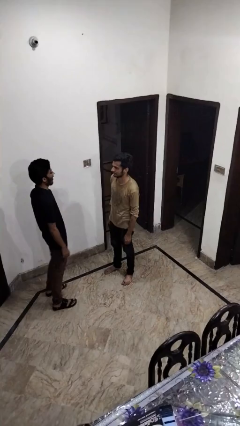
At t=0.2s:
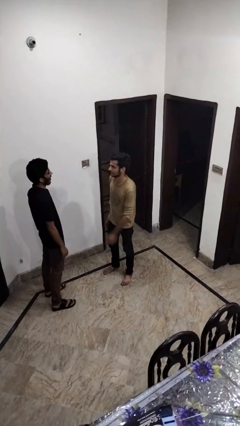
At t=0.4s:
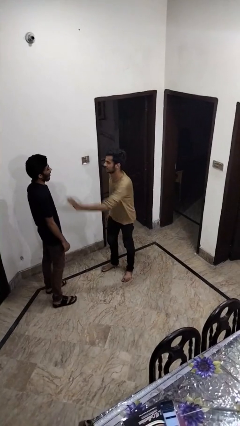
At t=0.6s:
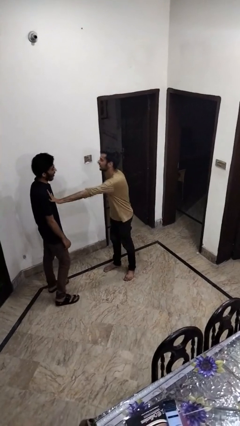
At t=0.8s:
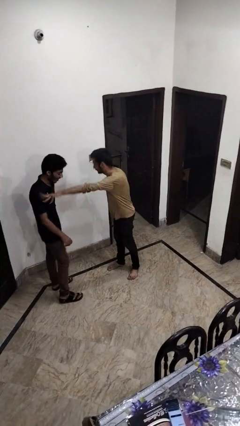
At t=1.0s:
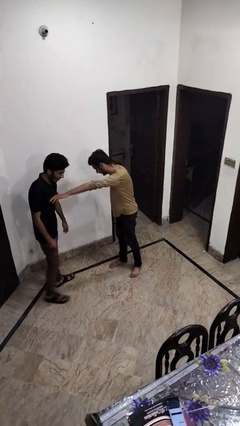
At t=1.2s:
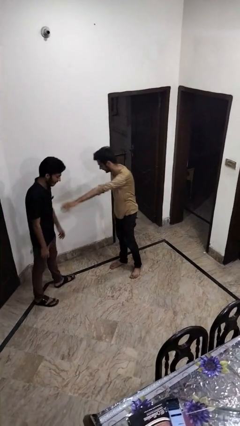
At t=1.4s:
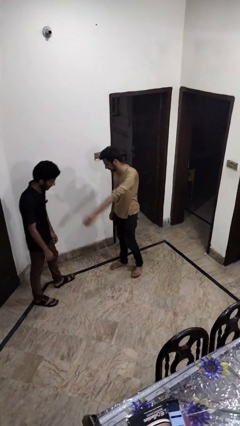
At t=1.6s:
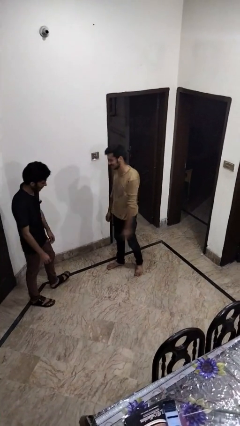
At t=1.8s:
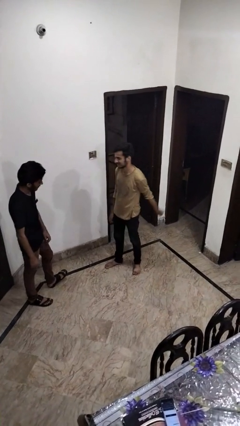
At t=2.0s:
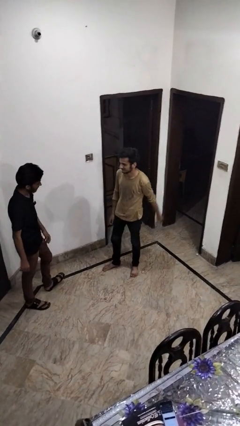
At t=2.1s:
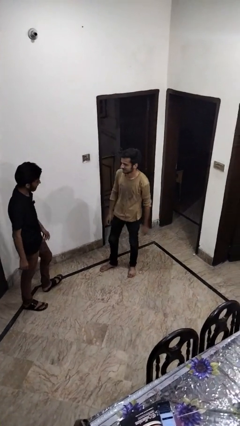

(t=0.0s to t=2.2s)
person shoves person

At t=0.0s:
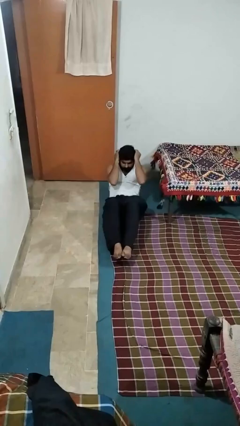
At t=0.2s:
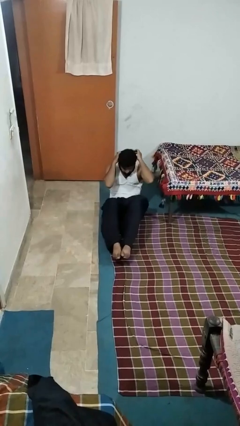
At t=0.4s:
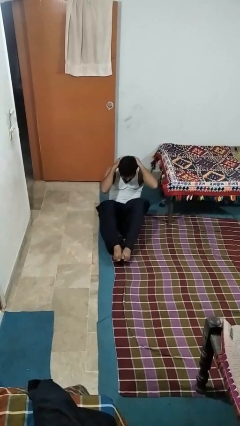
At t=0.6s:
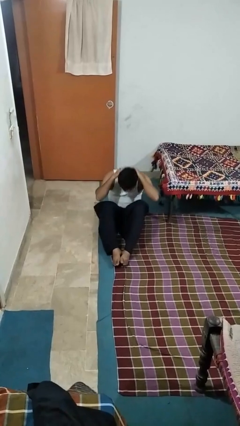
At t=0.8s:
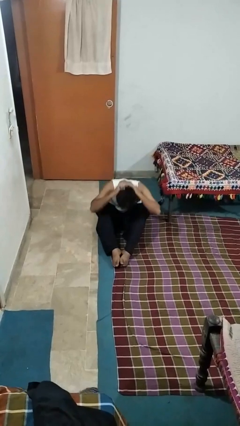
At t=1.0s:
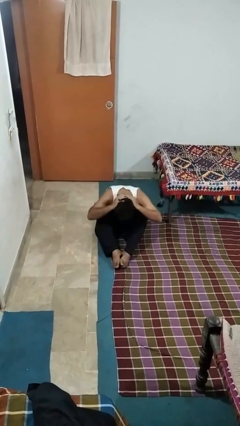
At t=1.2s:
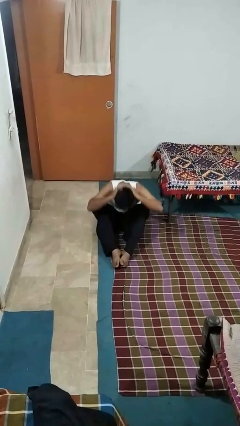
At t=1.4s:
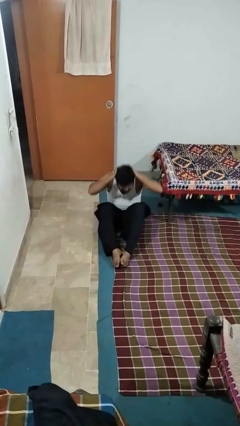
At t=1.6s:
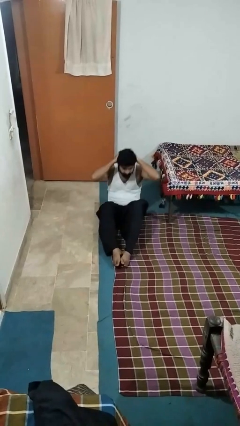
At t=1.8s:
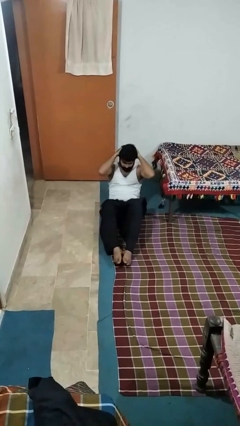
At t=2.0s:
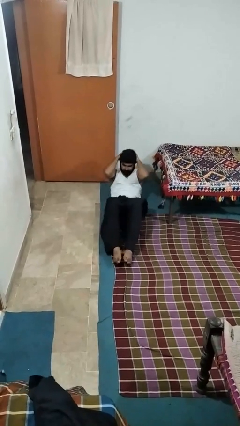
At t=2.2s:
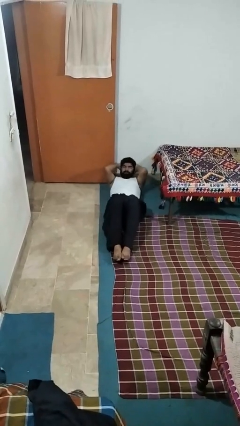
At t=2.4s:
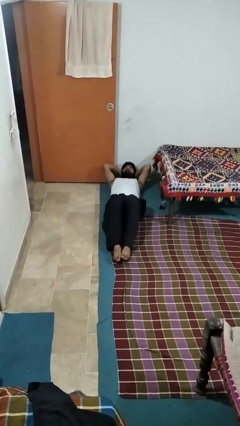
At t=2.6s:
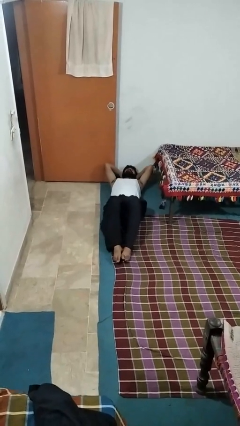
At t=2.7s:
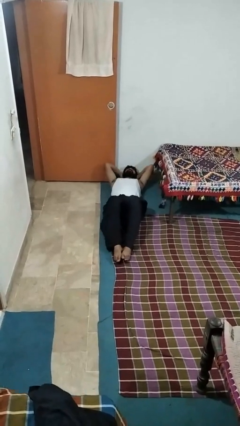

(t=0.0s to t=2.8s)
person exercises with situp

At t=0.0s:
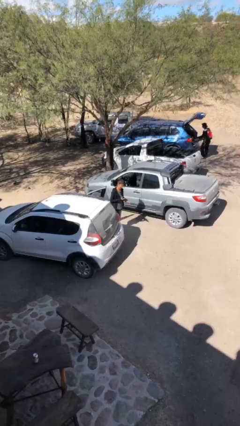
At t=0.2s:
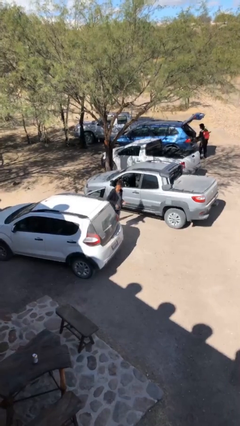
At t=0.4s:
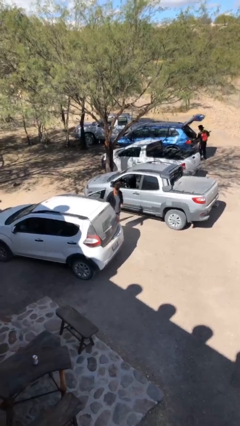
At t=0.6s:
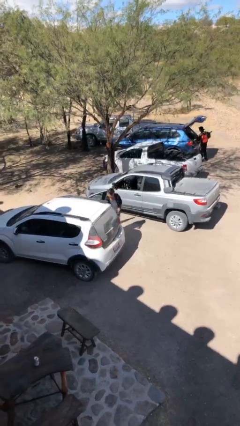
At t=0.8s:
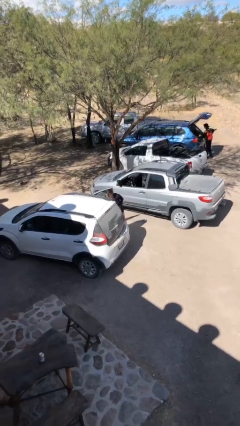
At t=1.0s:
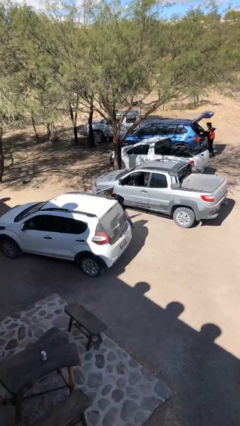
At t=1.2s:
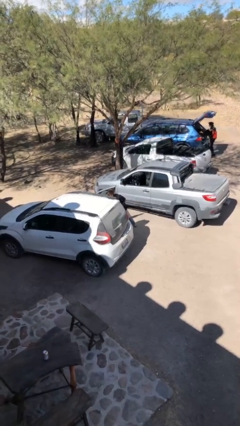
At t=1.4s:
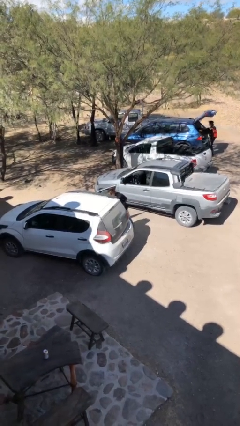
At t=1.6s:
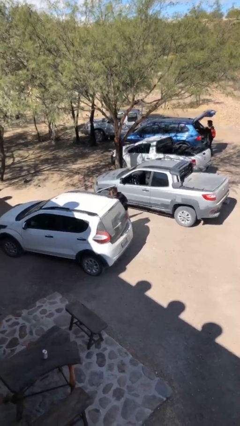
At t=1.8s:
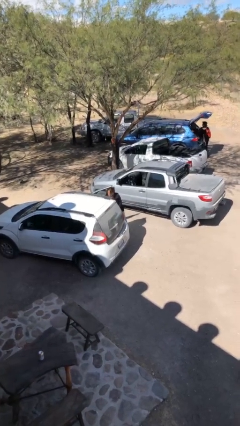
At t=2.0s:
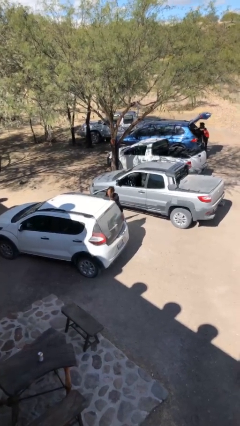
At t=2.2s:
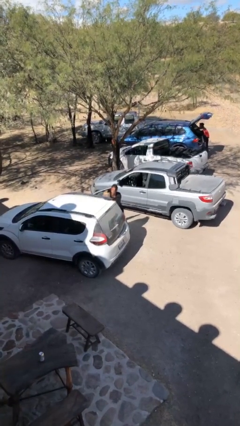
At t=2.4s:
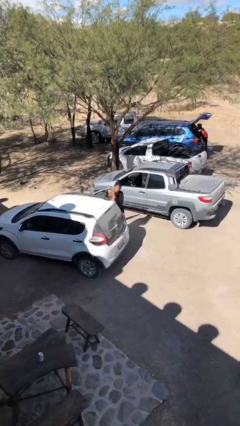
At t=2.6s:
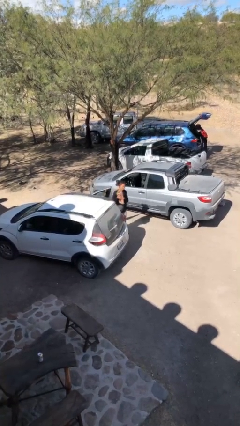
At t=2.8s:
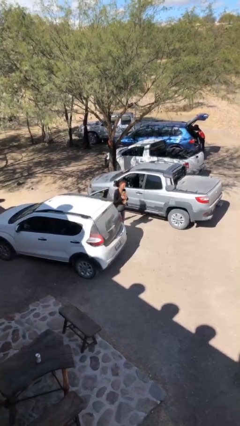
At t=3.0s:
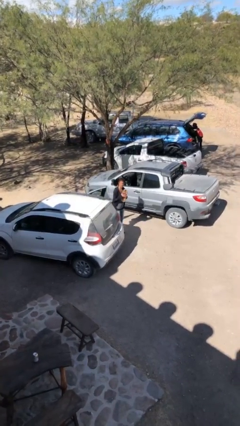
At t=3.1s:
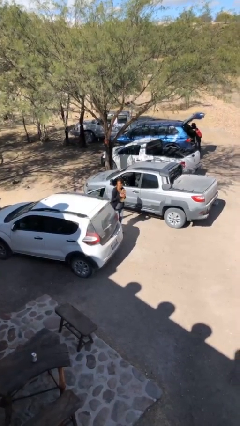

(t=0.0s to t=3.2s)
person unloads car

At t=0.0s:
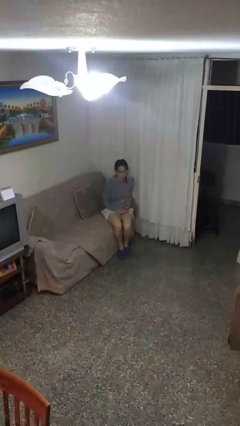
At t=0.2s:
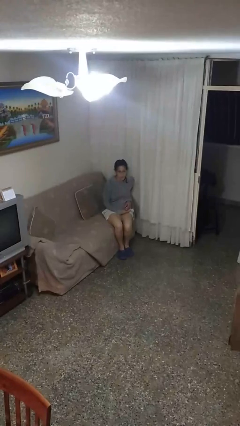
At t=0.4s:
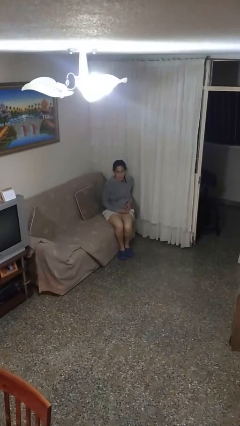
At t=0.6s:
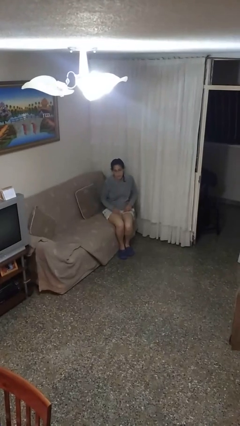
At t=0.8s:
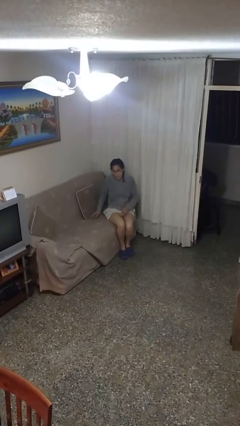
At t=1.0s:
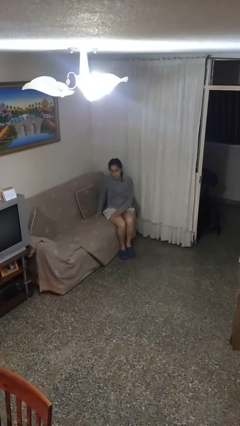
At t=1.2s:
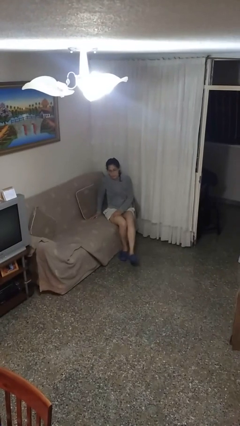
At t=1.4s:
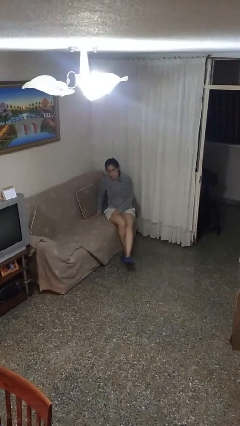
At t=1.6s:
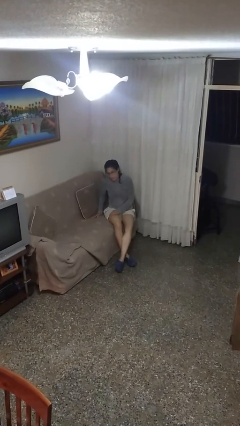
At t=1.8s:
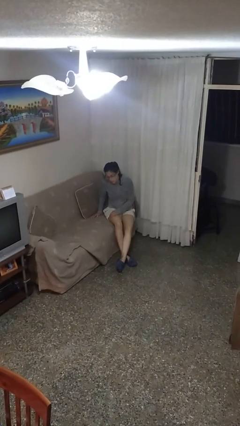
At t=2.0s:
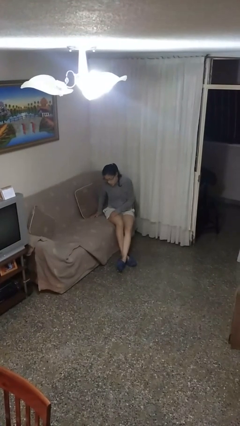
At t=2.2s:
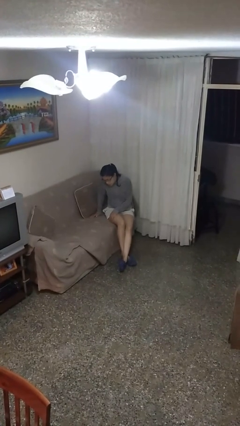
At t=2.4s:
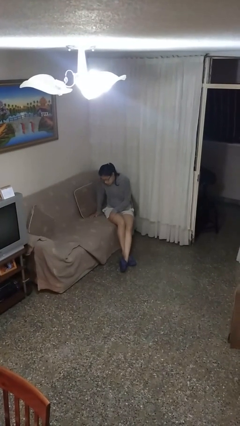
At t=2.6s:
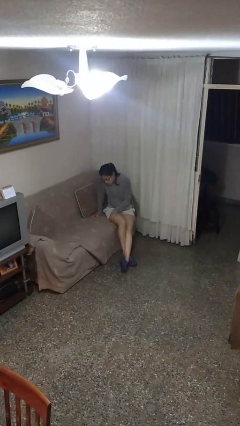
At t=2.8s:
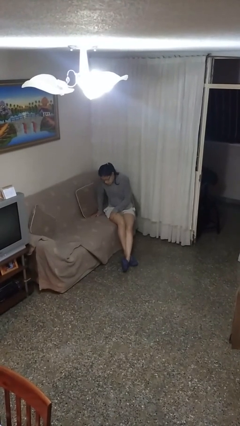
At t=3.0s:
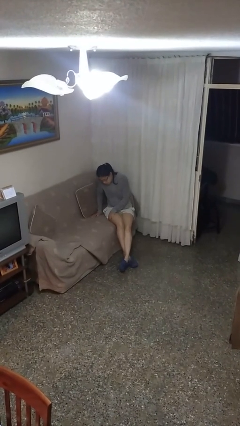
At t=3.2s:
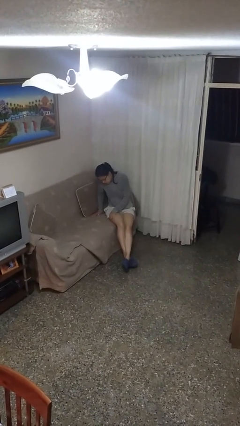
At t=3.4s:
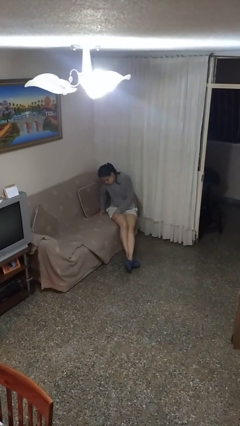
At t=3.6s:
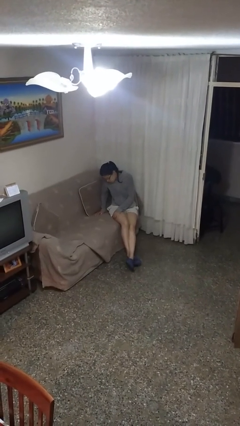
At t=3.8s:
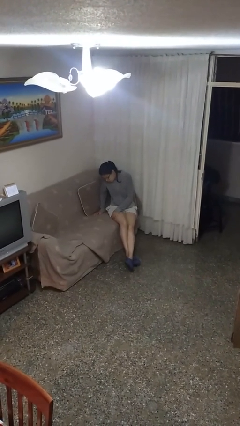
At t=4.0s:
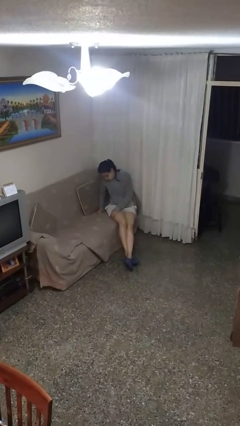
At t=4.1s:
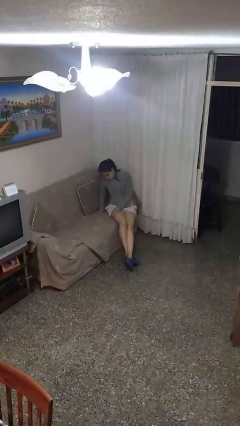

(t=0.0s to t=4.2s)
person crosses legs

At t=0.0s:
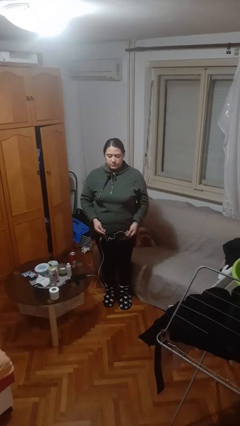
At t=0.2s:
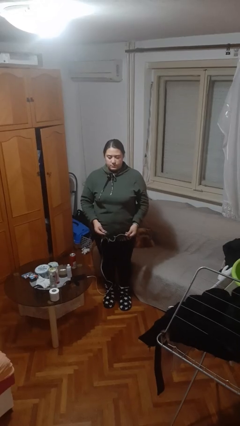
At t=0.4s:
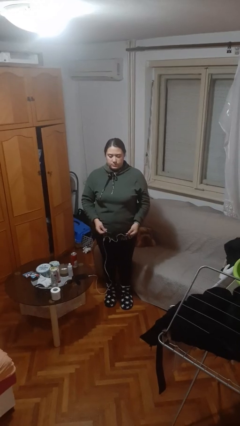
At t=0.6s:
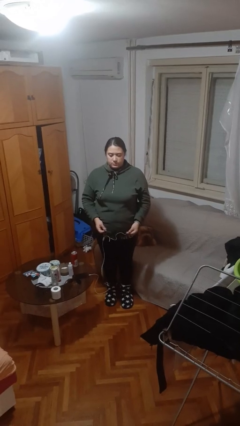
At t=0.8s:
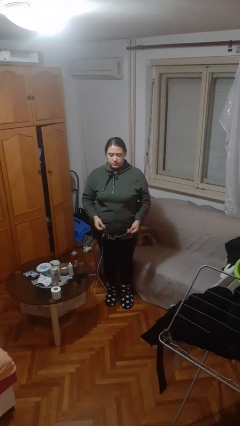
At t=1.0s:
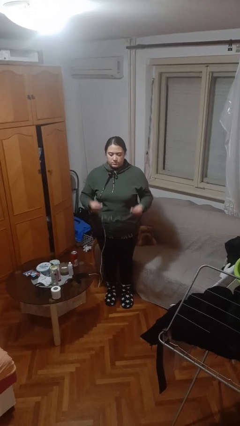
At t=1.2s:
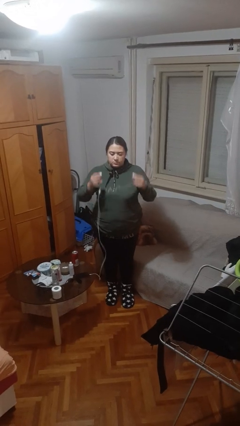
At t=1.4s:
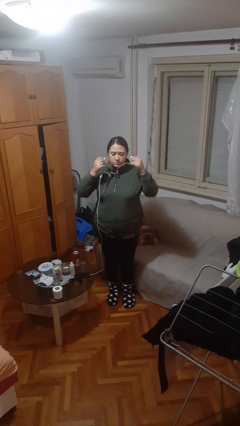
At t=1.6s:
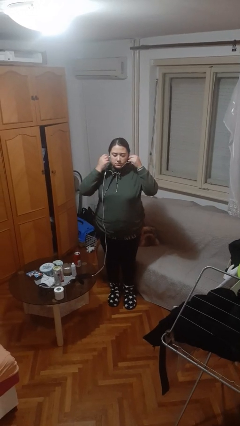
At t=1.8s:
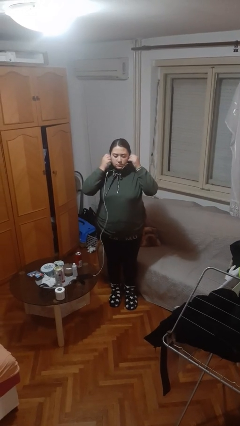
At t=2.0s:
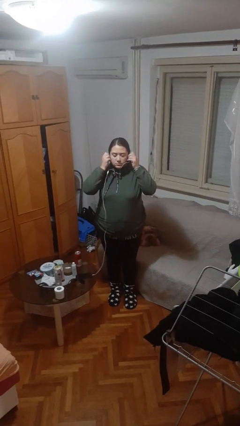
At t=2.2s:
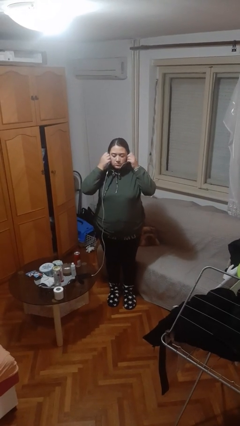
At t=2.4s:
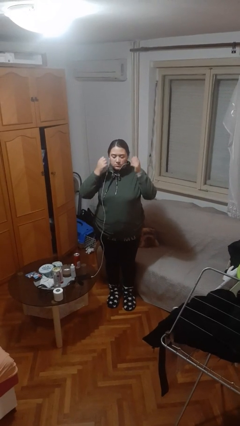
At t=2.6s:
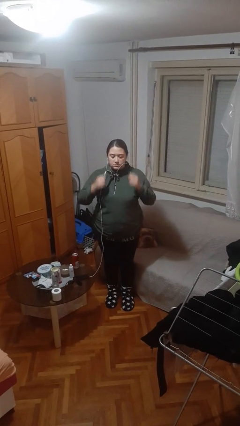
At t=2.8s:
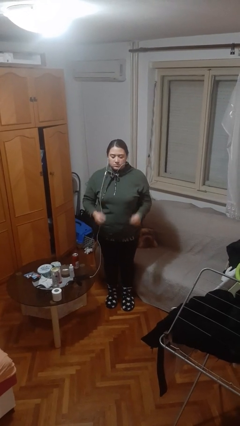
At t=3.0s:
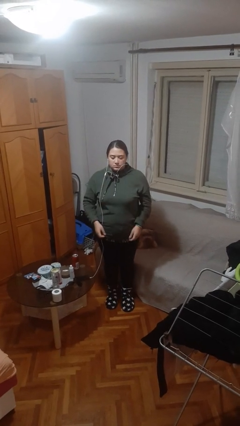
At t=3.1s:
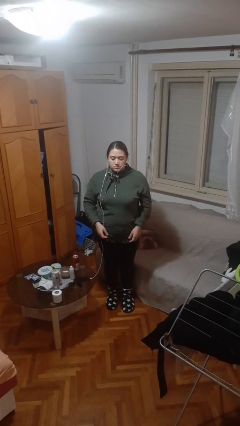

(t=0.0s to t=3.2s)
person puts on headphones

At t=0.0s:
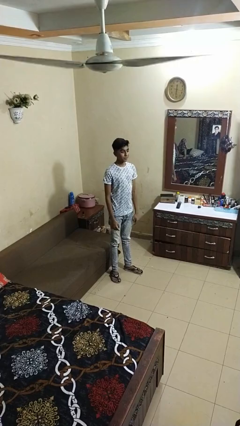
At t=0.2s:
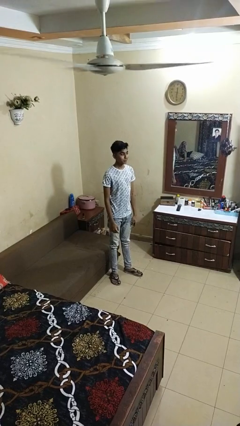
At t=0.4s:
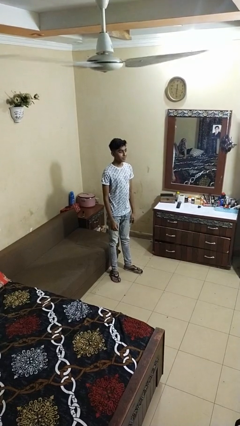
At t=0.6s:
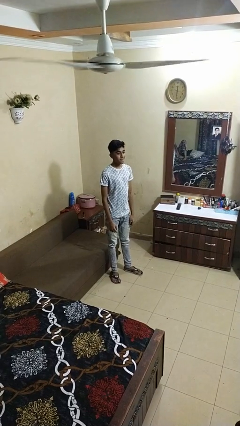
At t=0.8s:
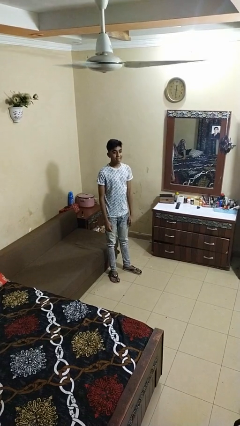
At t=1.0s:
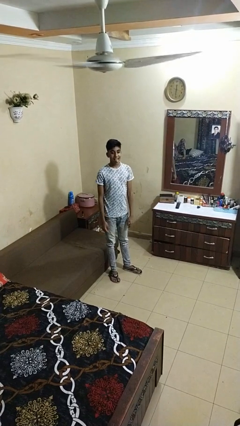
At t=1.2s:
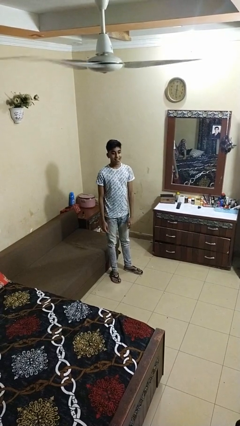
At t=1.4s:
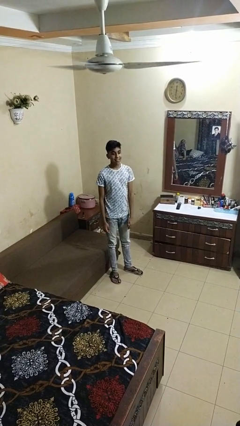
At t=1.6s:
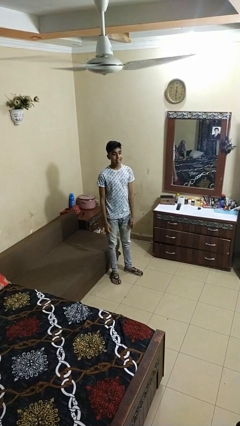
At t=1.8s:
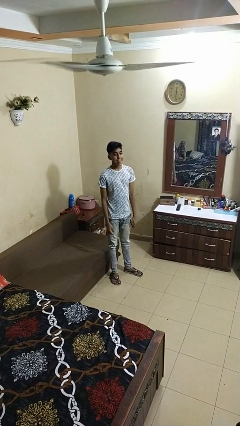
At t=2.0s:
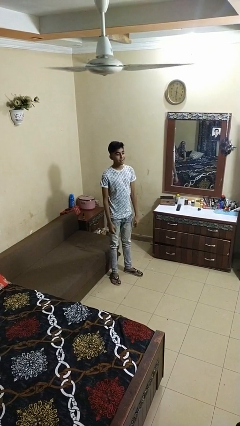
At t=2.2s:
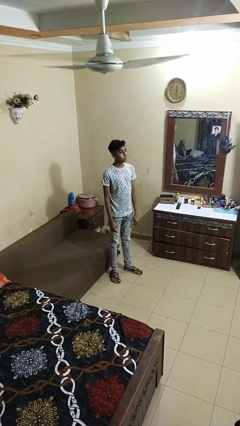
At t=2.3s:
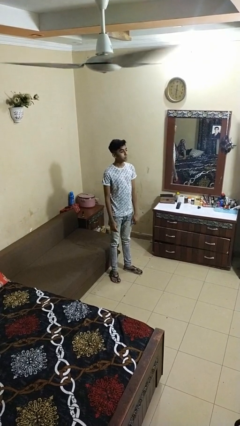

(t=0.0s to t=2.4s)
person sticks out tongue
